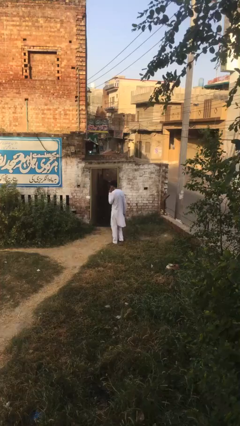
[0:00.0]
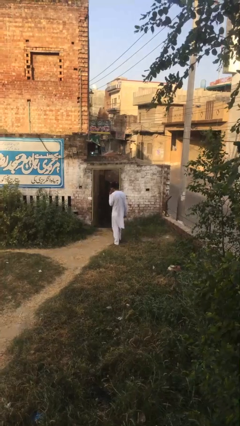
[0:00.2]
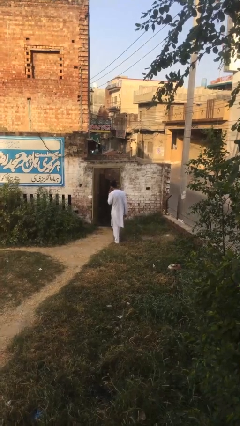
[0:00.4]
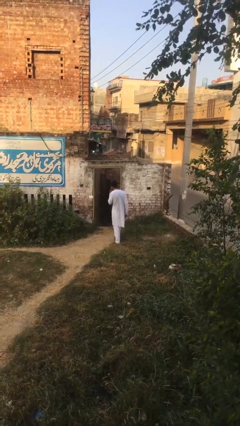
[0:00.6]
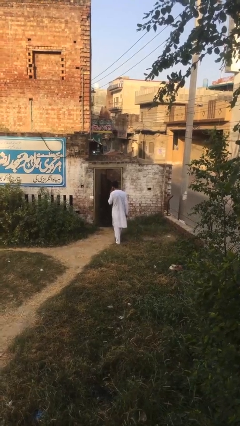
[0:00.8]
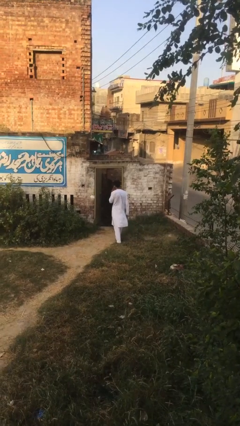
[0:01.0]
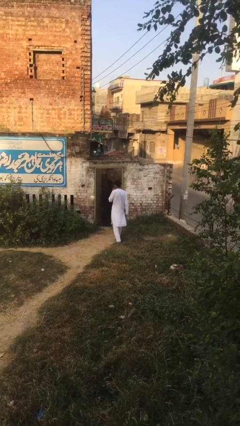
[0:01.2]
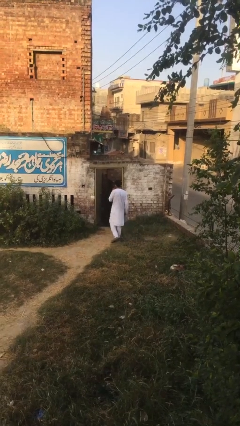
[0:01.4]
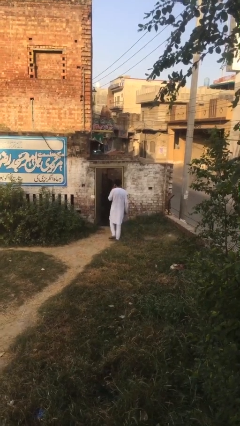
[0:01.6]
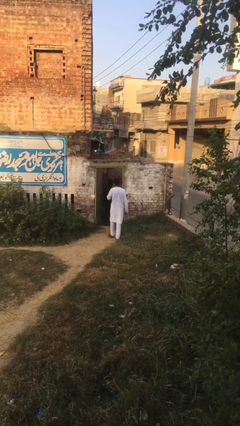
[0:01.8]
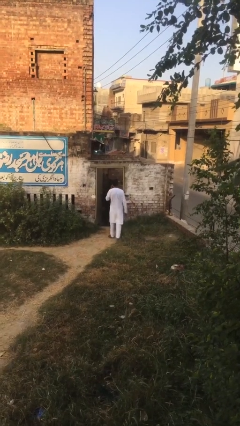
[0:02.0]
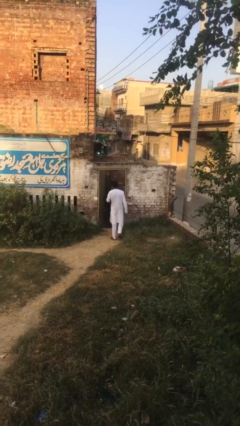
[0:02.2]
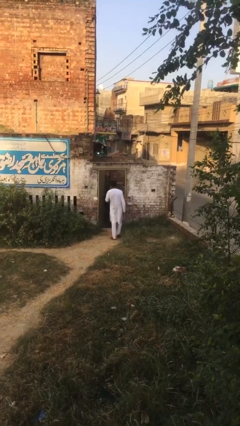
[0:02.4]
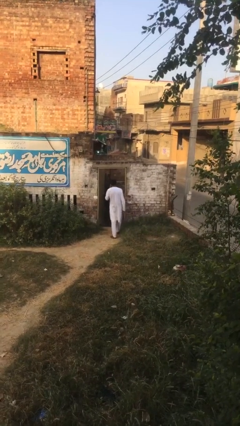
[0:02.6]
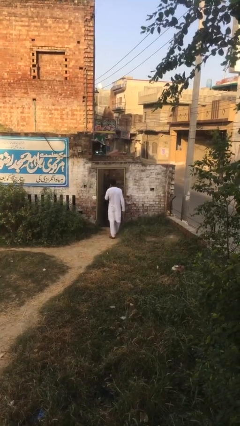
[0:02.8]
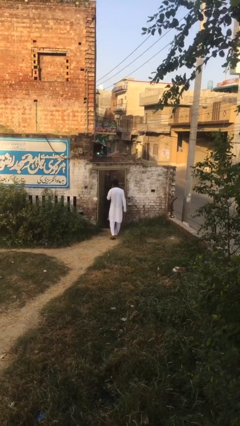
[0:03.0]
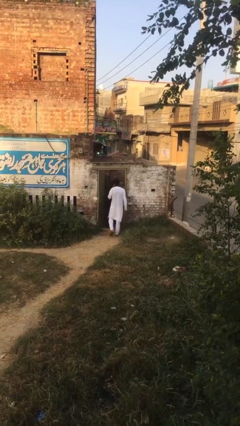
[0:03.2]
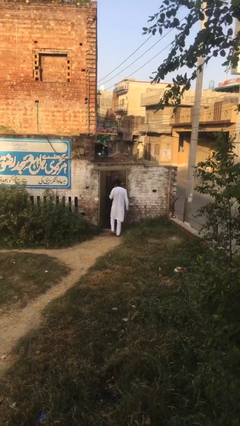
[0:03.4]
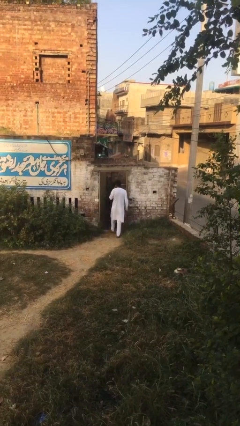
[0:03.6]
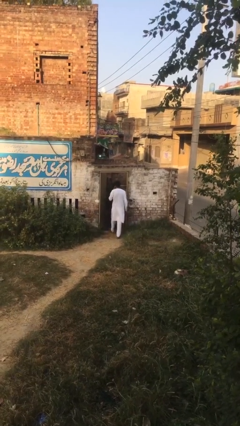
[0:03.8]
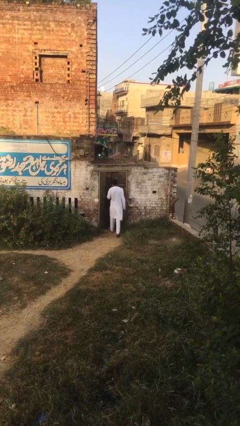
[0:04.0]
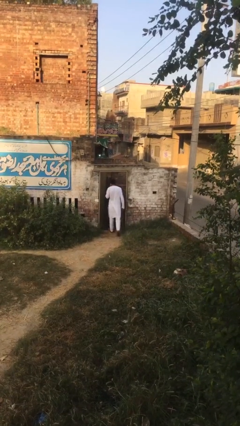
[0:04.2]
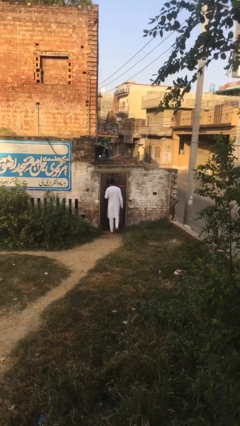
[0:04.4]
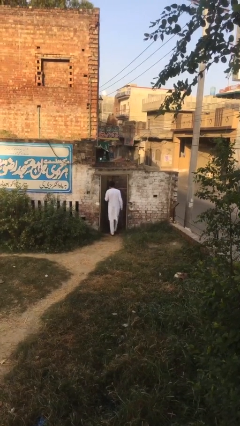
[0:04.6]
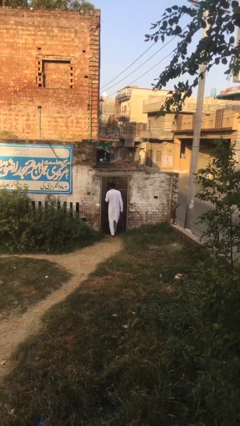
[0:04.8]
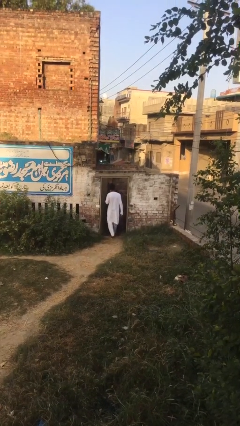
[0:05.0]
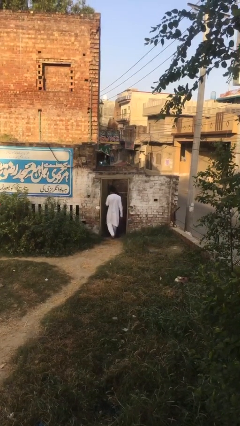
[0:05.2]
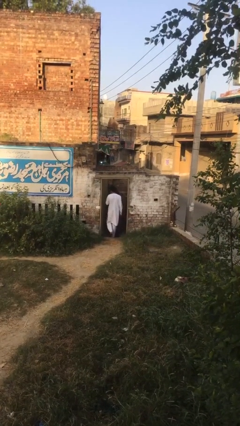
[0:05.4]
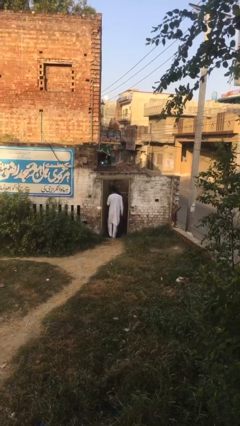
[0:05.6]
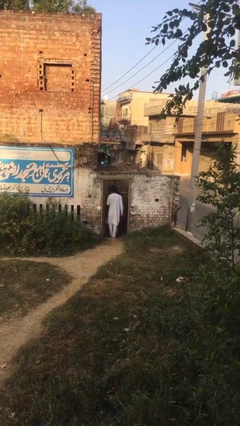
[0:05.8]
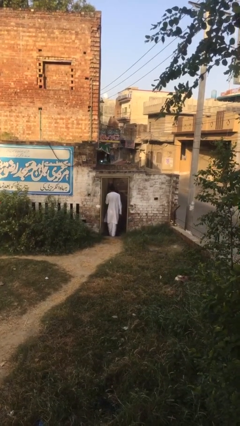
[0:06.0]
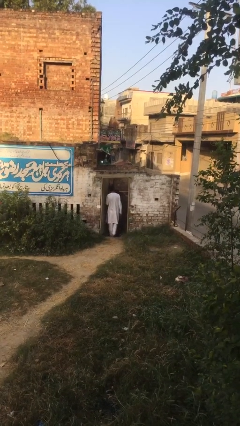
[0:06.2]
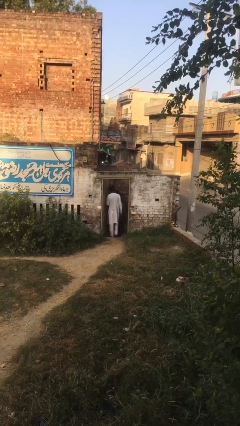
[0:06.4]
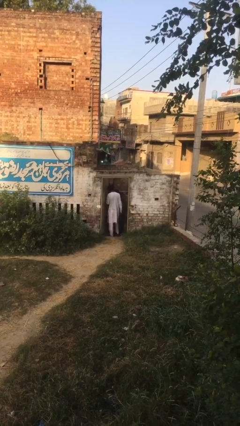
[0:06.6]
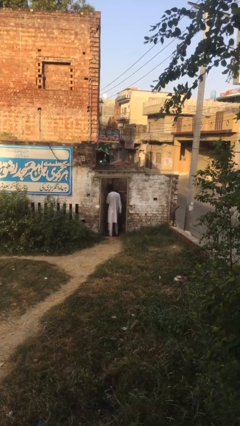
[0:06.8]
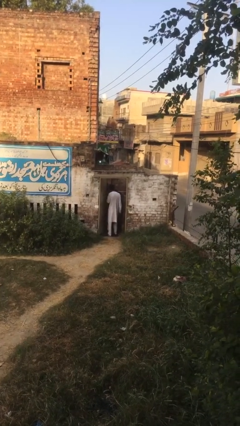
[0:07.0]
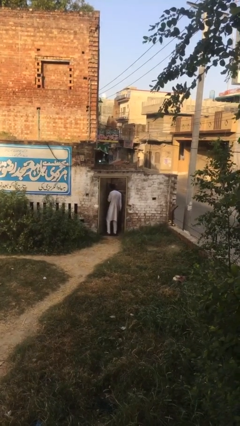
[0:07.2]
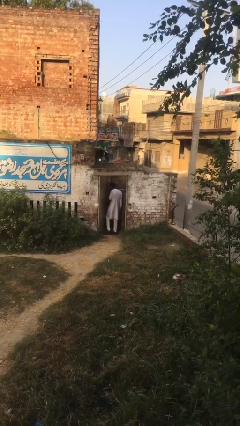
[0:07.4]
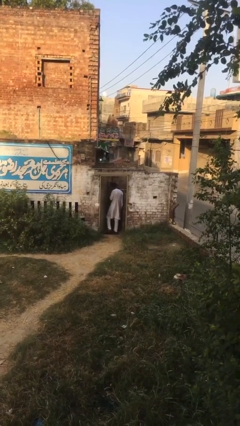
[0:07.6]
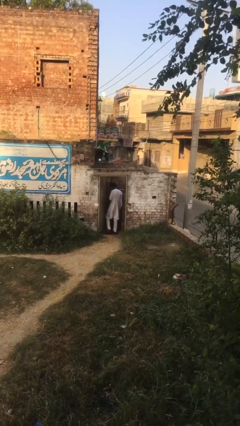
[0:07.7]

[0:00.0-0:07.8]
person exits scene through structure

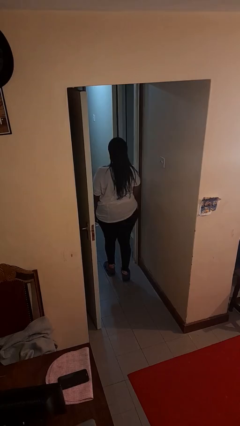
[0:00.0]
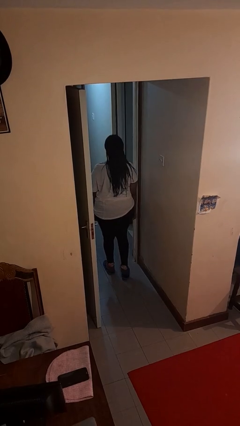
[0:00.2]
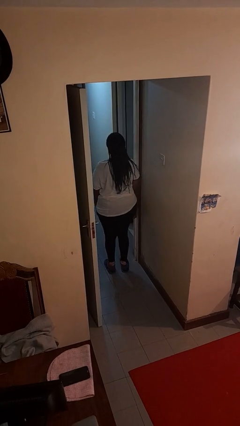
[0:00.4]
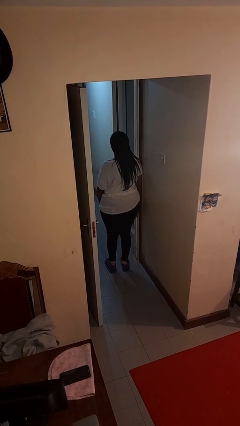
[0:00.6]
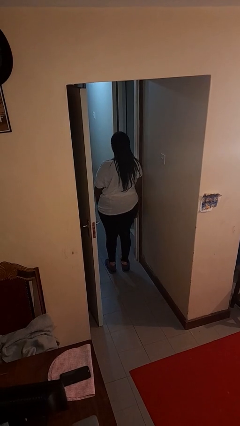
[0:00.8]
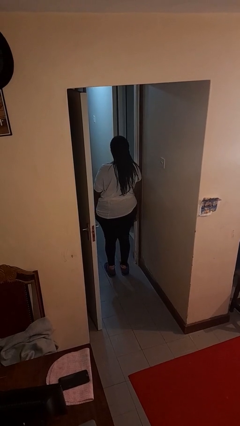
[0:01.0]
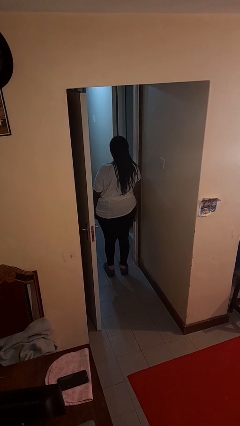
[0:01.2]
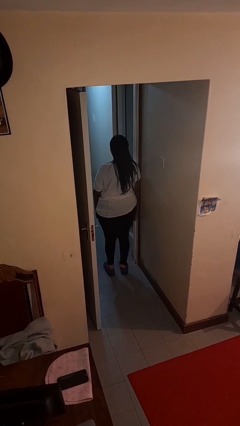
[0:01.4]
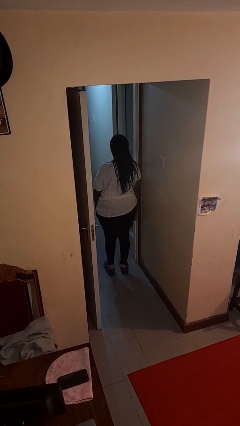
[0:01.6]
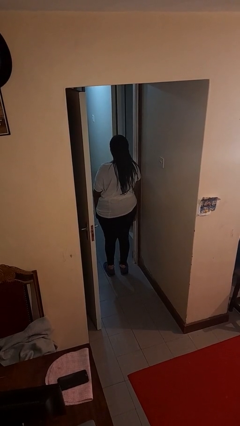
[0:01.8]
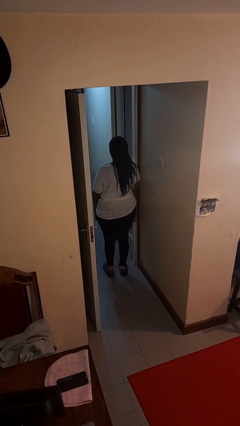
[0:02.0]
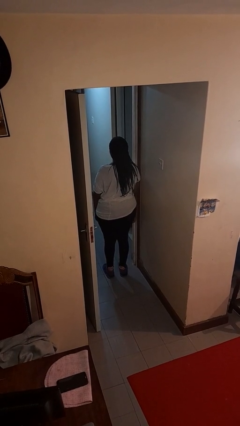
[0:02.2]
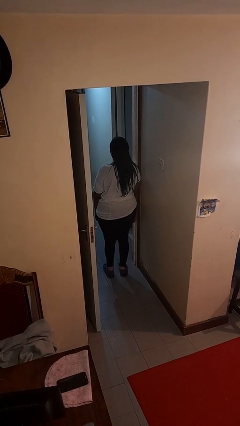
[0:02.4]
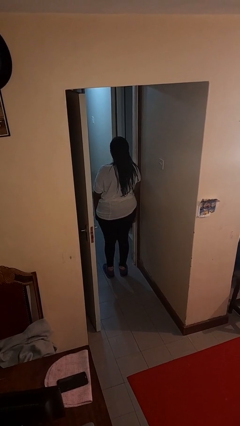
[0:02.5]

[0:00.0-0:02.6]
person bumps into wall

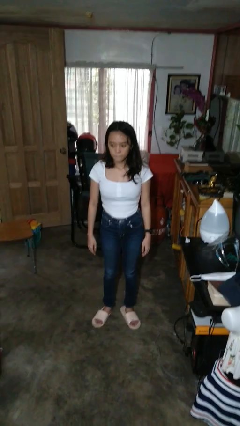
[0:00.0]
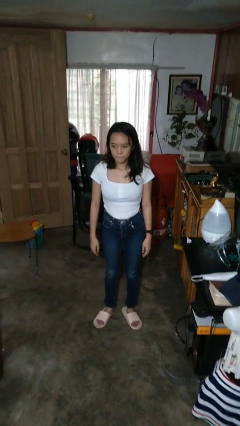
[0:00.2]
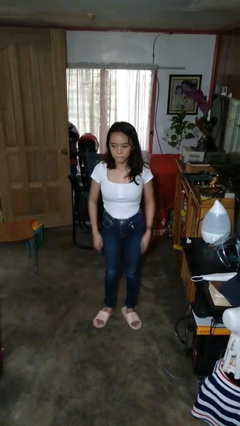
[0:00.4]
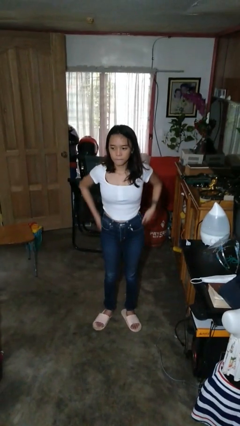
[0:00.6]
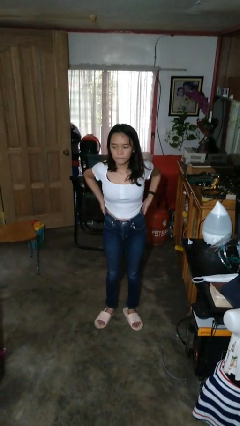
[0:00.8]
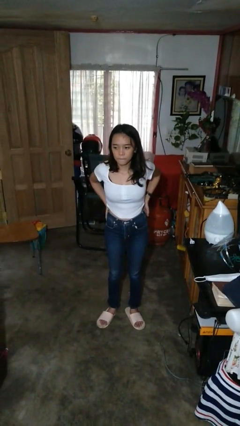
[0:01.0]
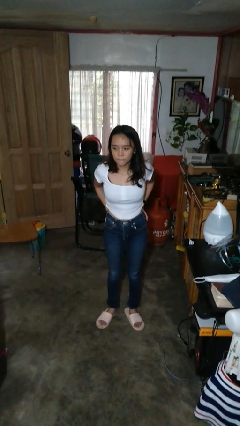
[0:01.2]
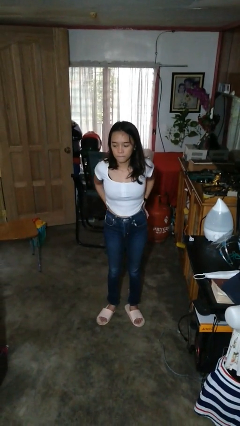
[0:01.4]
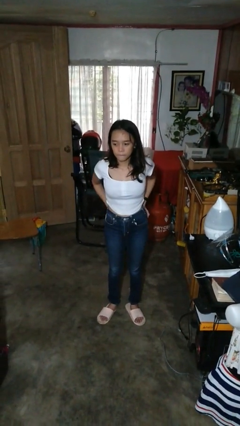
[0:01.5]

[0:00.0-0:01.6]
person puts hands in back pockets

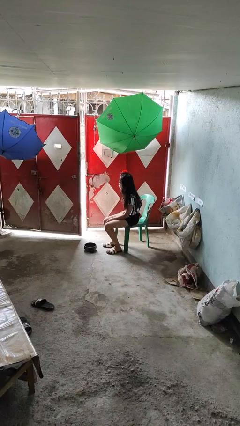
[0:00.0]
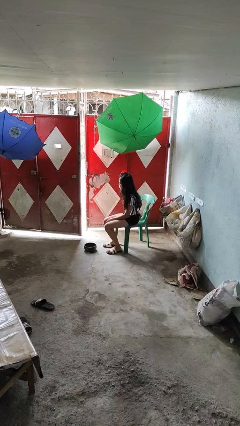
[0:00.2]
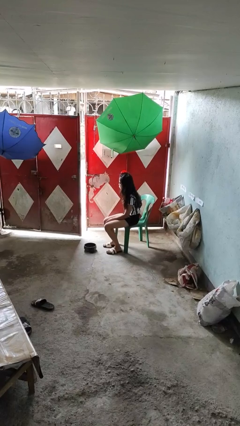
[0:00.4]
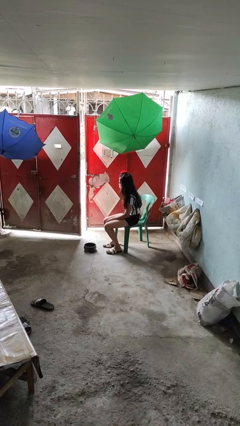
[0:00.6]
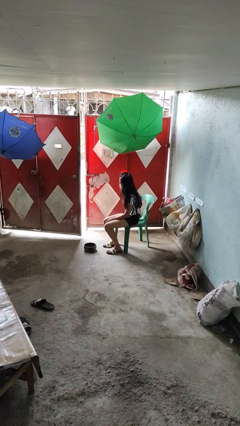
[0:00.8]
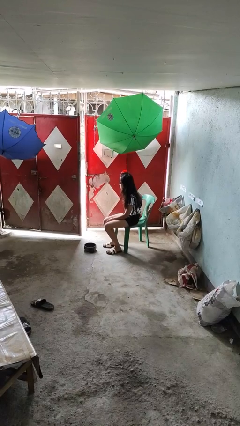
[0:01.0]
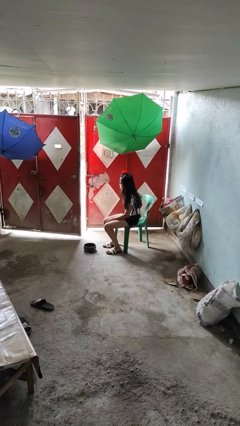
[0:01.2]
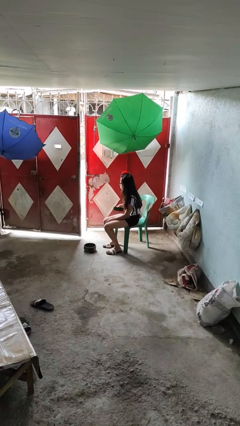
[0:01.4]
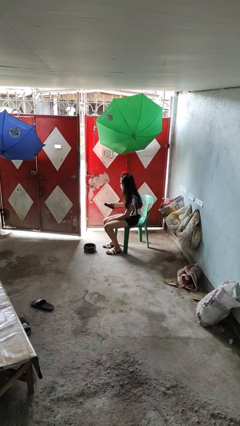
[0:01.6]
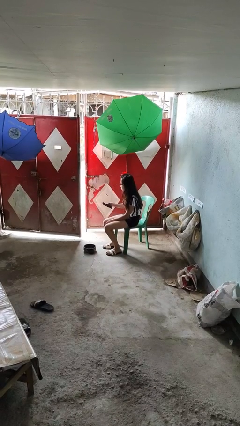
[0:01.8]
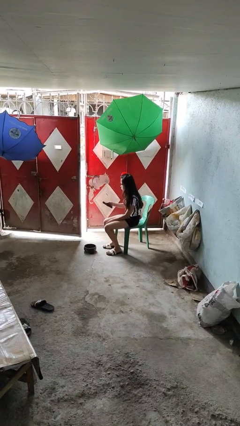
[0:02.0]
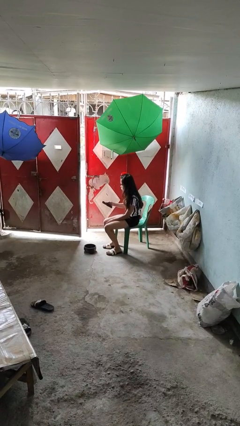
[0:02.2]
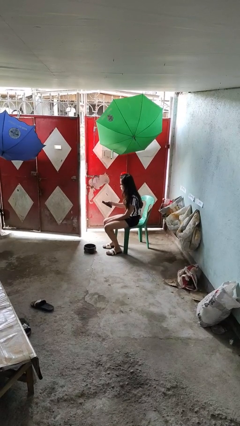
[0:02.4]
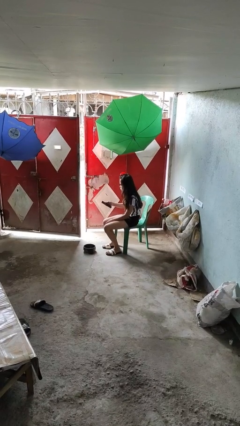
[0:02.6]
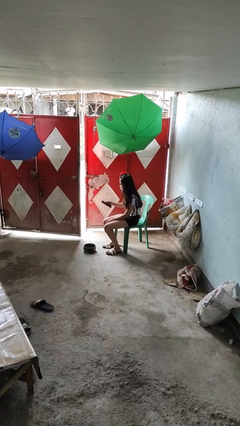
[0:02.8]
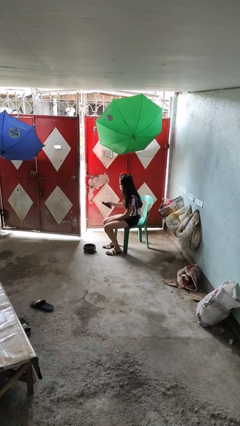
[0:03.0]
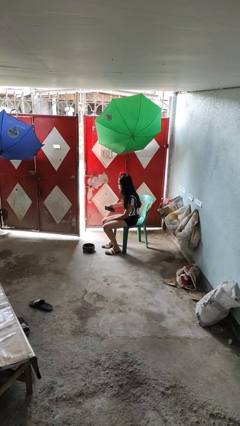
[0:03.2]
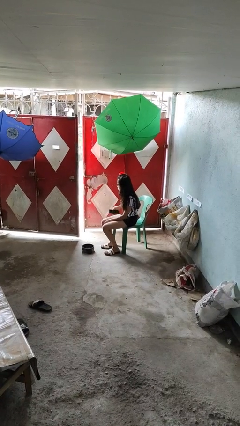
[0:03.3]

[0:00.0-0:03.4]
person takes phone from pocket

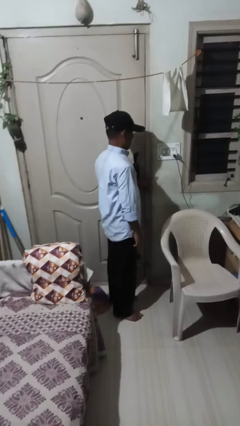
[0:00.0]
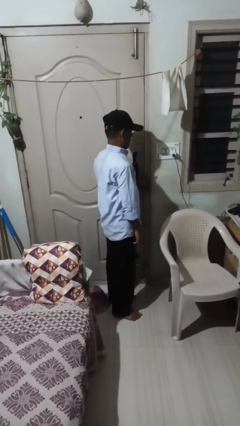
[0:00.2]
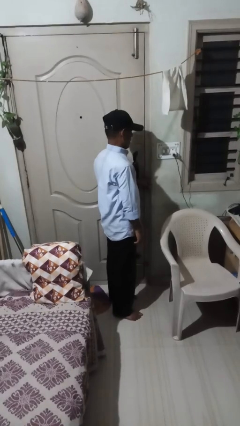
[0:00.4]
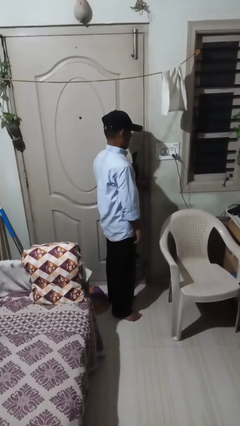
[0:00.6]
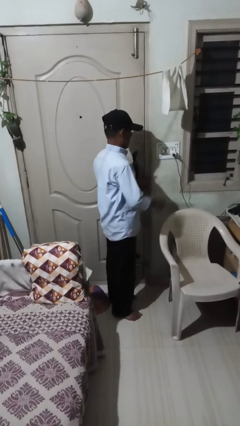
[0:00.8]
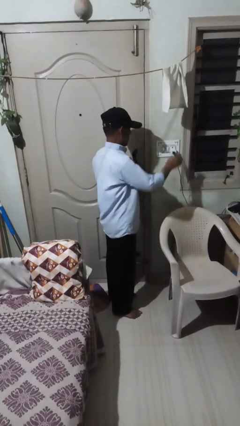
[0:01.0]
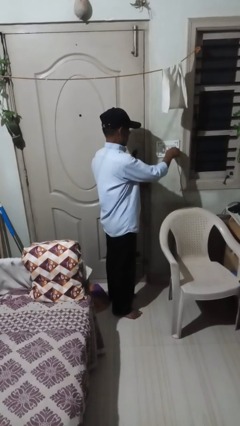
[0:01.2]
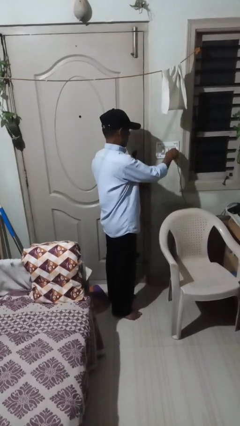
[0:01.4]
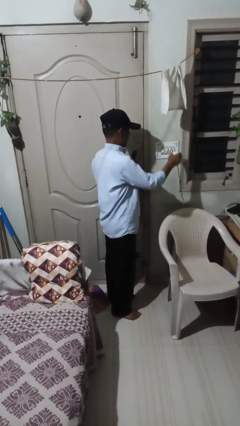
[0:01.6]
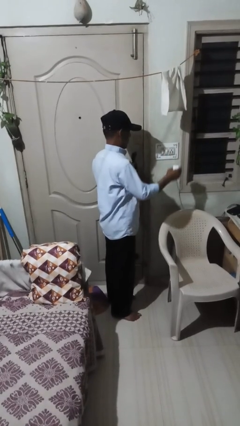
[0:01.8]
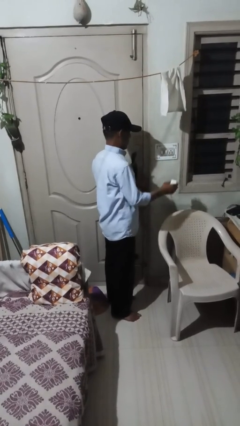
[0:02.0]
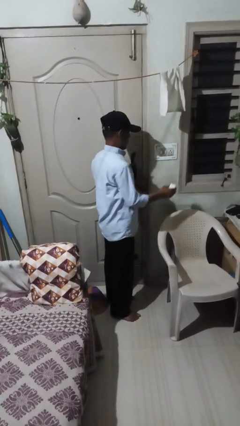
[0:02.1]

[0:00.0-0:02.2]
person unplugs from electrical socket
